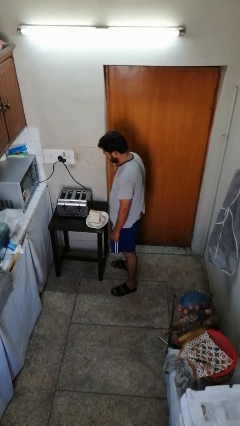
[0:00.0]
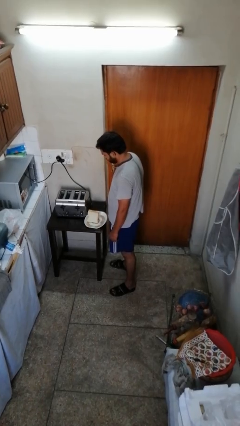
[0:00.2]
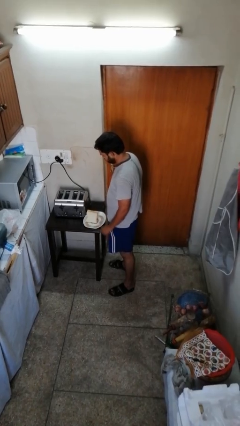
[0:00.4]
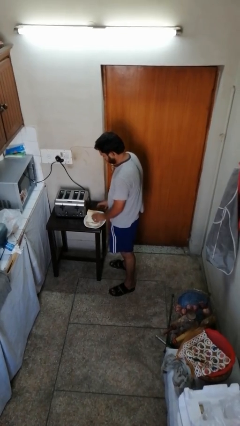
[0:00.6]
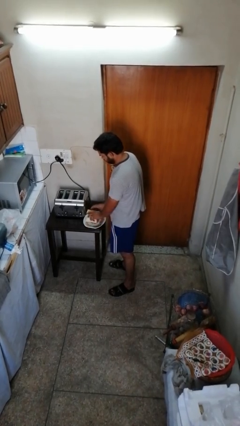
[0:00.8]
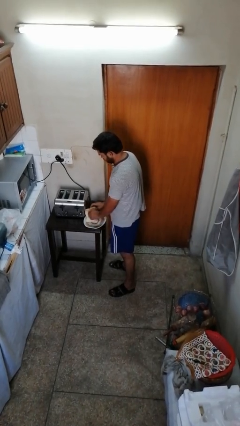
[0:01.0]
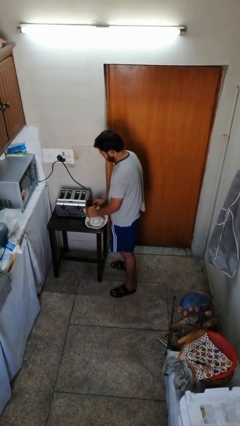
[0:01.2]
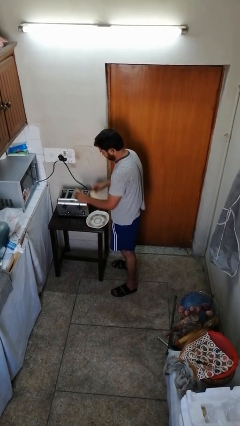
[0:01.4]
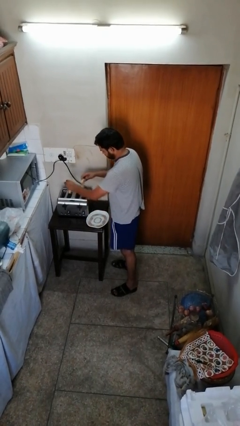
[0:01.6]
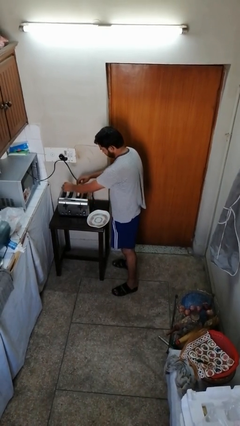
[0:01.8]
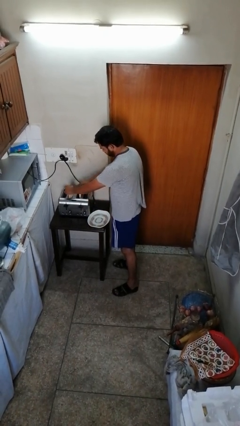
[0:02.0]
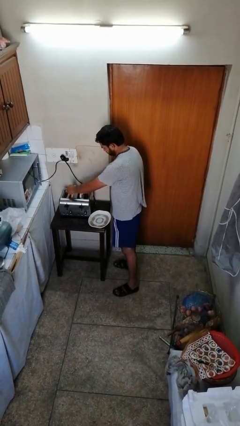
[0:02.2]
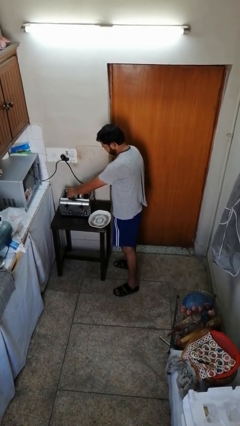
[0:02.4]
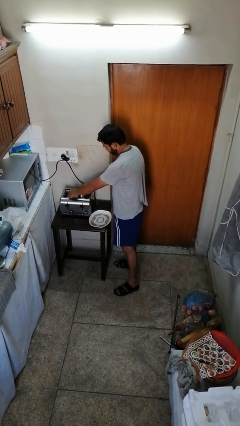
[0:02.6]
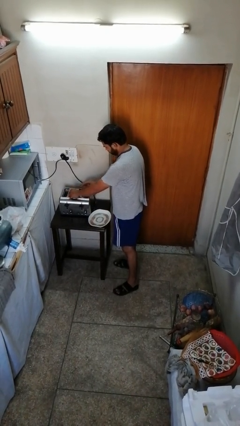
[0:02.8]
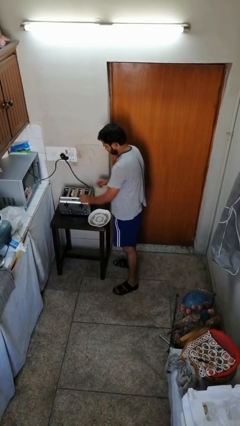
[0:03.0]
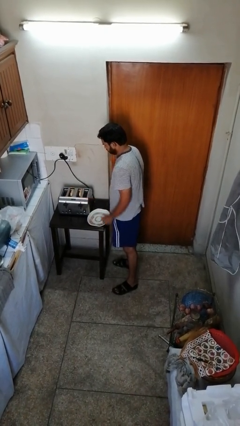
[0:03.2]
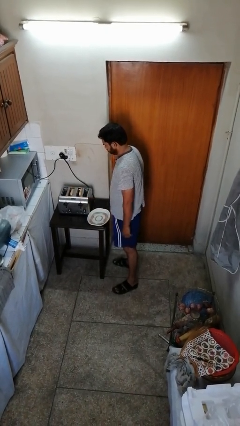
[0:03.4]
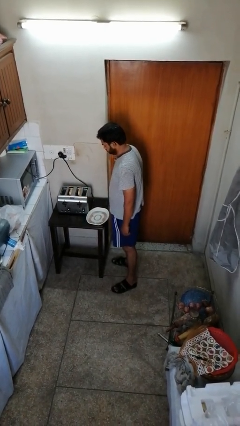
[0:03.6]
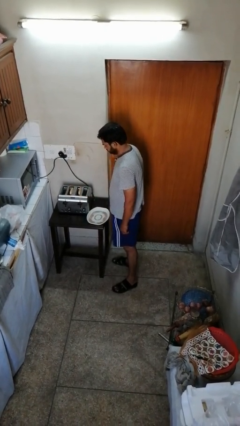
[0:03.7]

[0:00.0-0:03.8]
person puts object into toaster

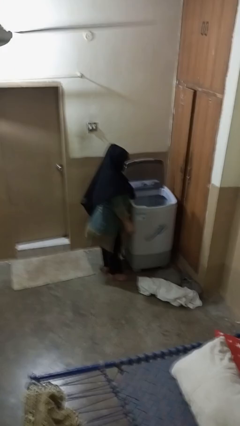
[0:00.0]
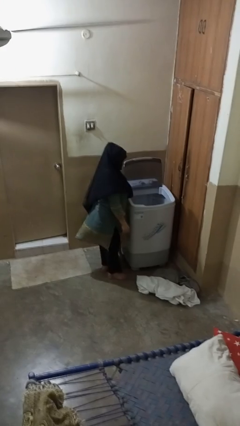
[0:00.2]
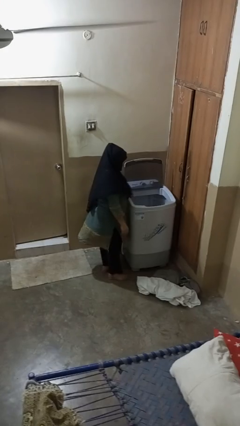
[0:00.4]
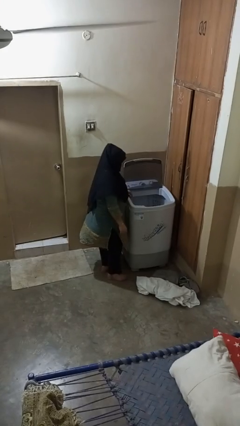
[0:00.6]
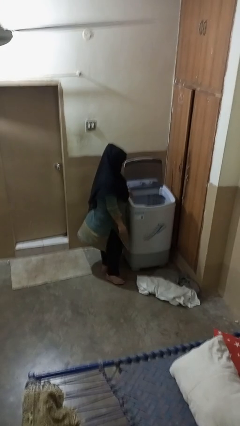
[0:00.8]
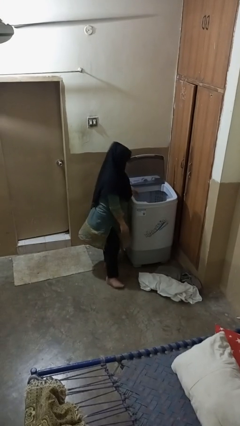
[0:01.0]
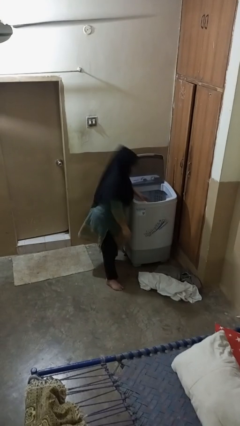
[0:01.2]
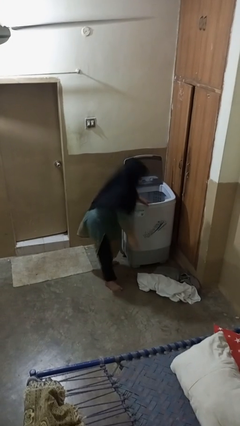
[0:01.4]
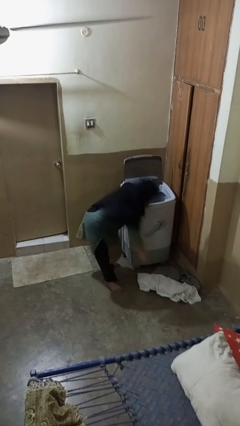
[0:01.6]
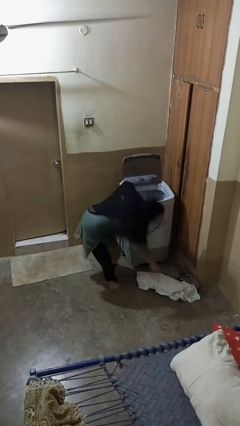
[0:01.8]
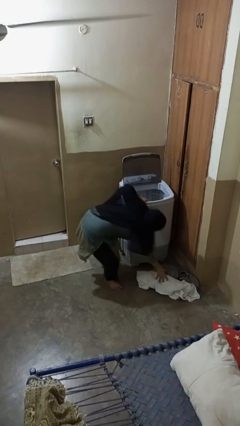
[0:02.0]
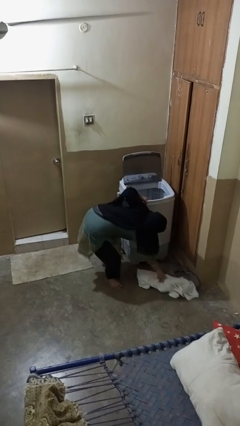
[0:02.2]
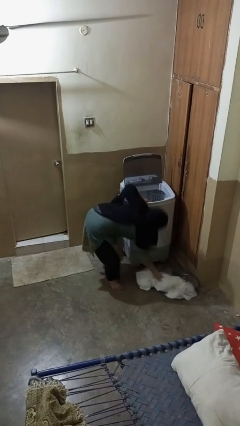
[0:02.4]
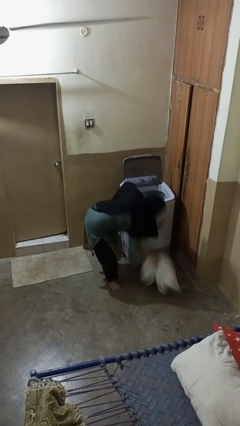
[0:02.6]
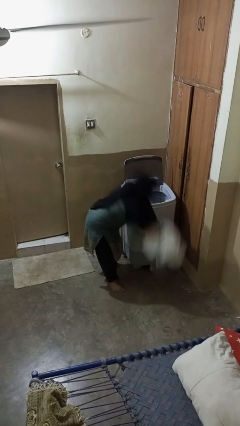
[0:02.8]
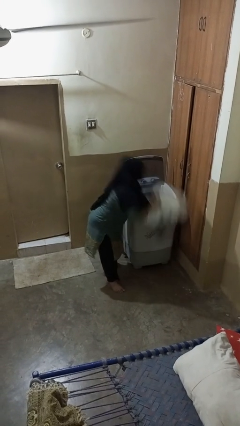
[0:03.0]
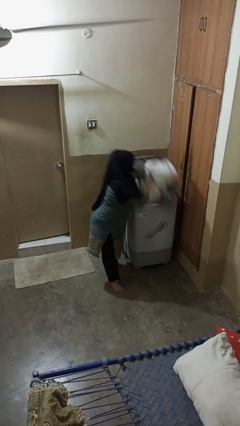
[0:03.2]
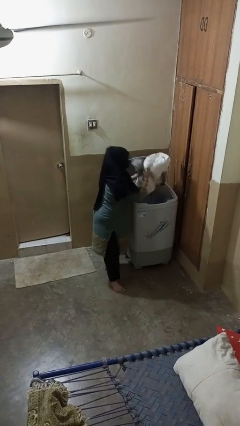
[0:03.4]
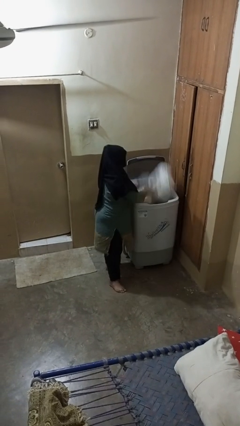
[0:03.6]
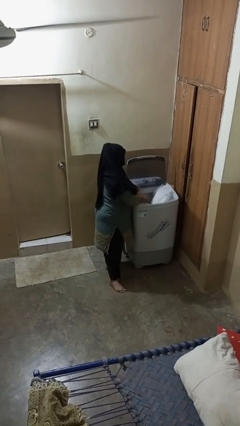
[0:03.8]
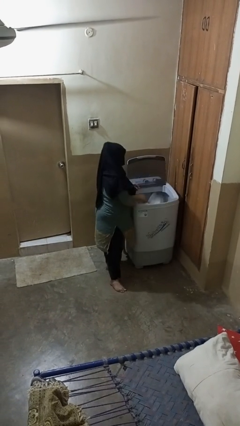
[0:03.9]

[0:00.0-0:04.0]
person loads clotheswasher

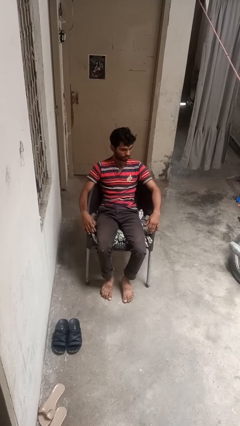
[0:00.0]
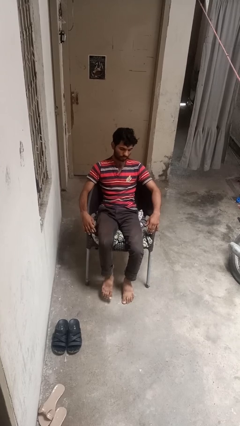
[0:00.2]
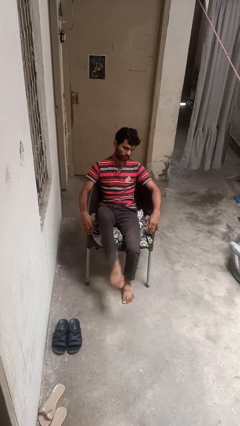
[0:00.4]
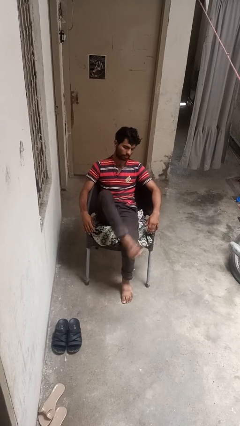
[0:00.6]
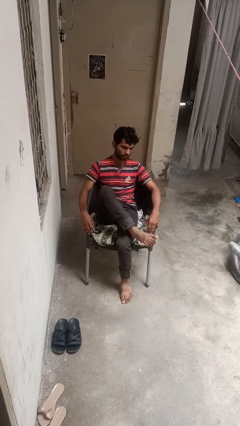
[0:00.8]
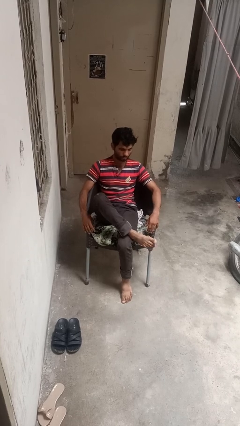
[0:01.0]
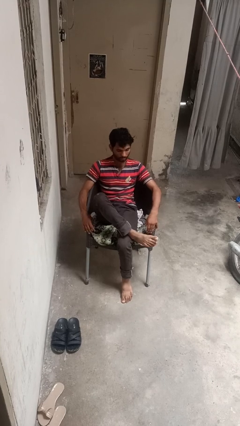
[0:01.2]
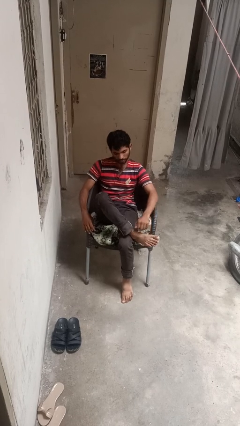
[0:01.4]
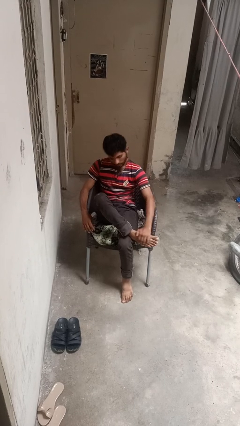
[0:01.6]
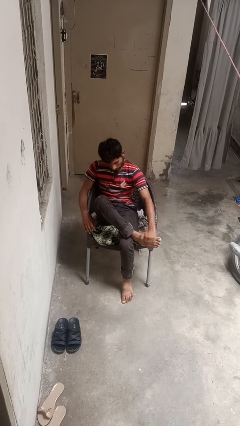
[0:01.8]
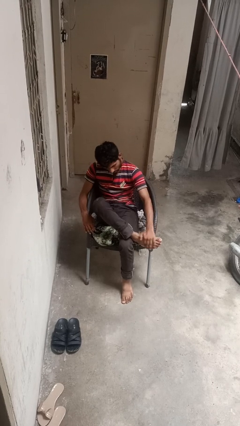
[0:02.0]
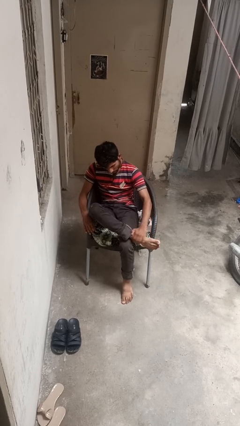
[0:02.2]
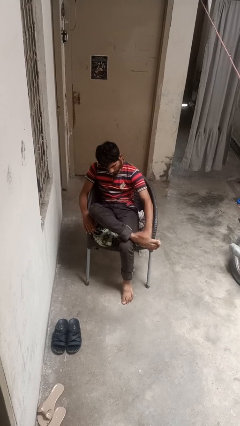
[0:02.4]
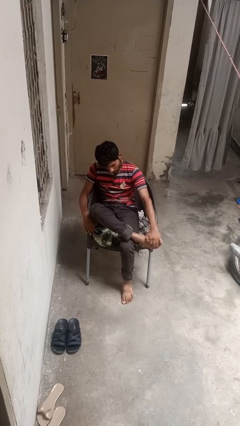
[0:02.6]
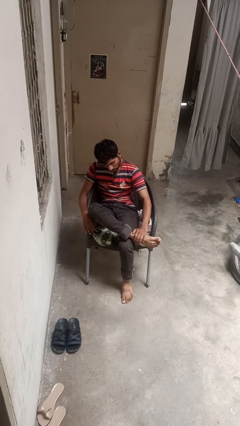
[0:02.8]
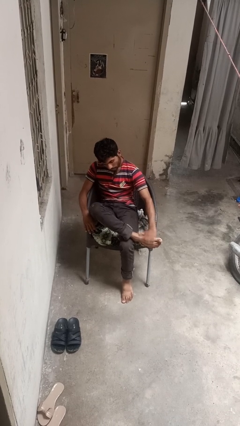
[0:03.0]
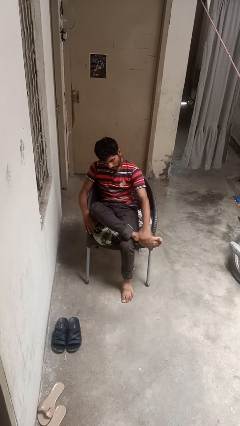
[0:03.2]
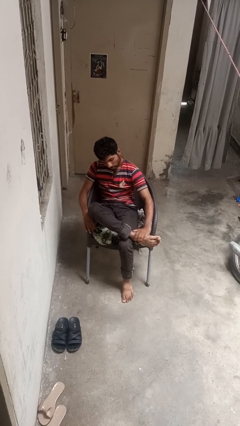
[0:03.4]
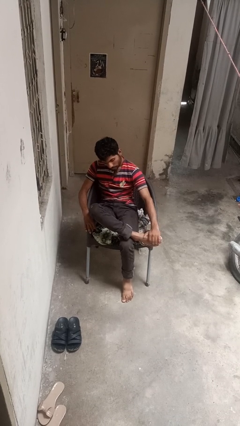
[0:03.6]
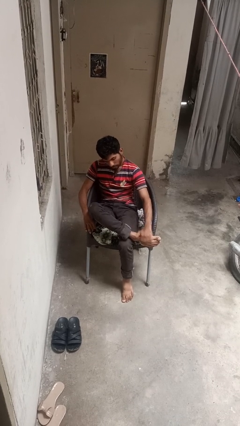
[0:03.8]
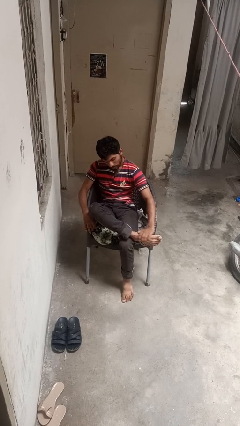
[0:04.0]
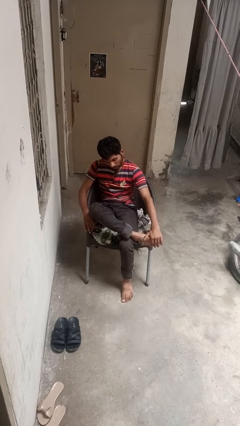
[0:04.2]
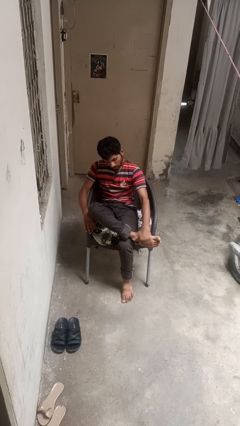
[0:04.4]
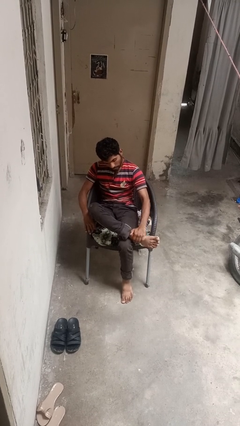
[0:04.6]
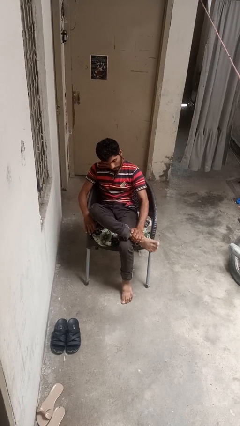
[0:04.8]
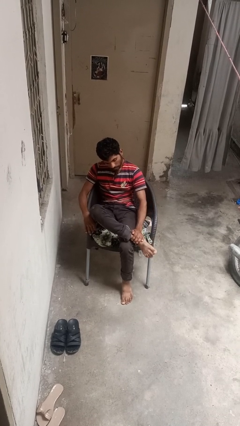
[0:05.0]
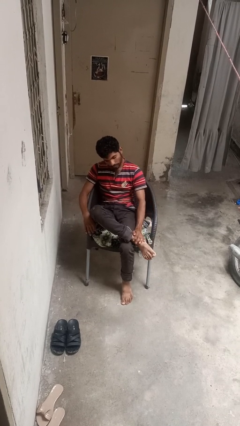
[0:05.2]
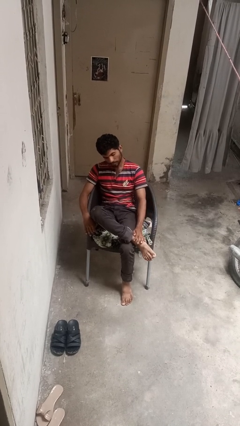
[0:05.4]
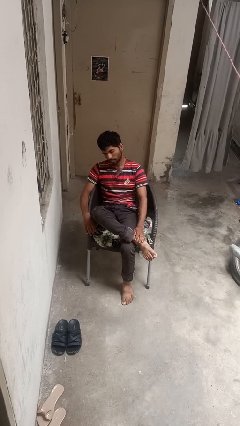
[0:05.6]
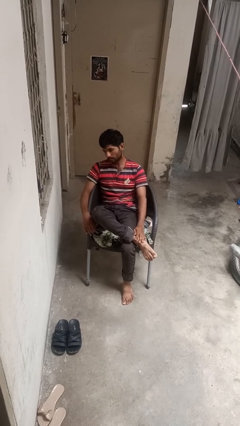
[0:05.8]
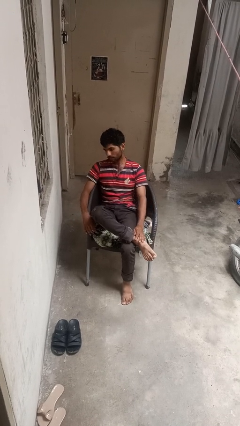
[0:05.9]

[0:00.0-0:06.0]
person rubs foot

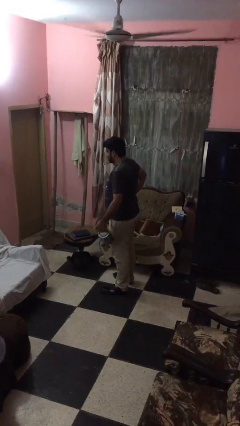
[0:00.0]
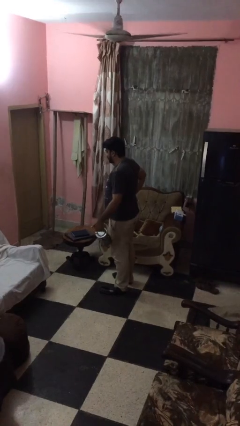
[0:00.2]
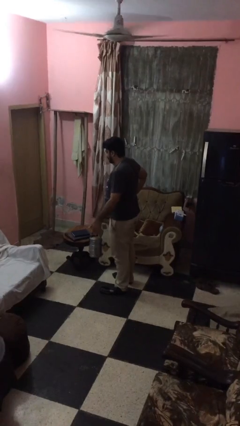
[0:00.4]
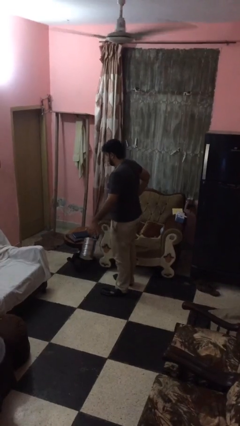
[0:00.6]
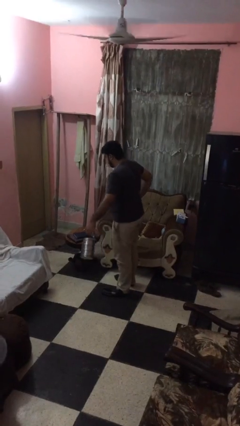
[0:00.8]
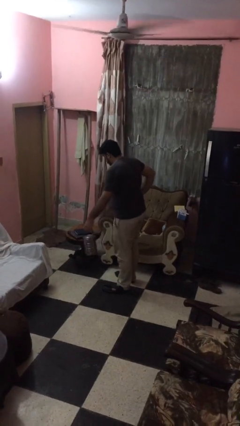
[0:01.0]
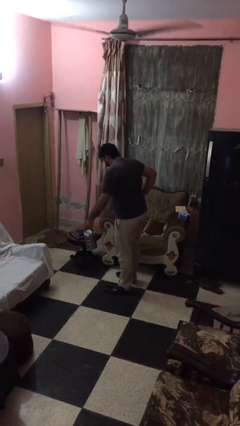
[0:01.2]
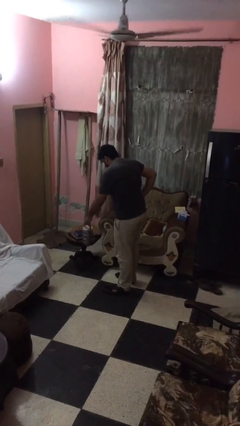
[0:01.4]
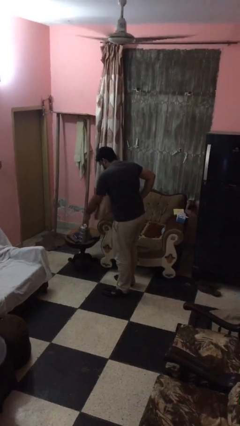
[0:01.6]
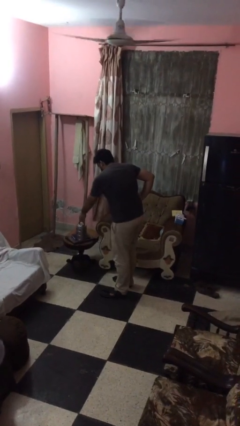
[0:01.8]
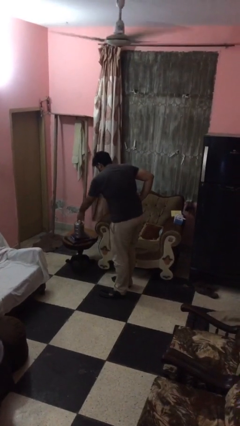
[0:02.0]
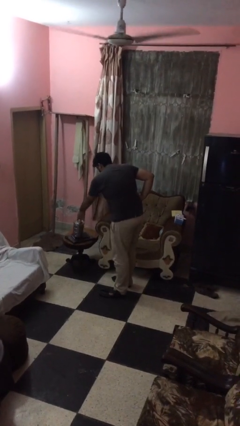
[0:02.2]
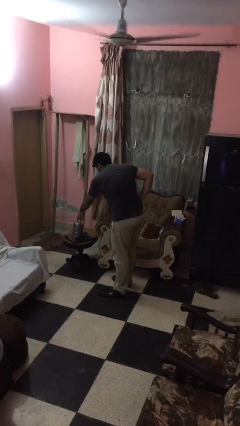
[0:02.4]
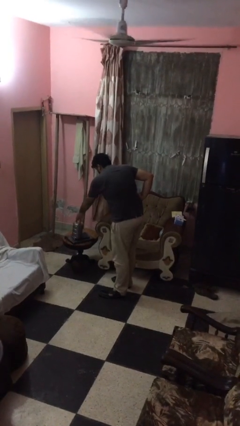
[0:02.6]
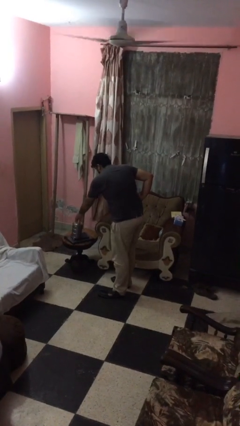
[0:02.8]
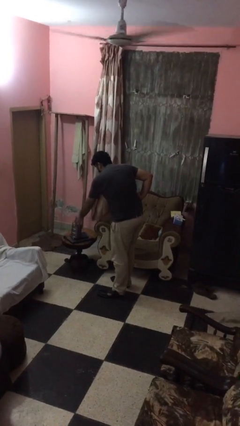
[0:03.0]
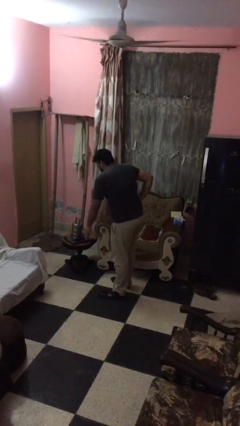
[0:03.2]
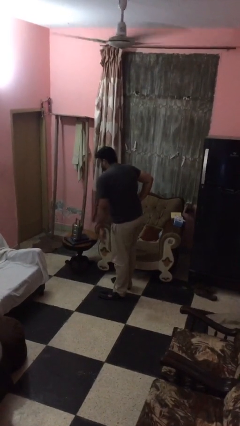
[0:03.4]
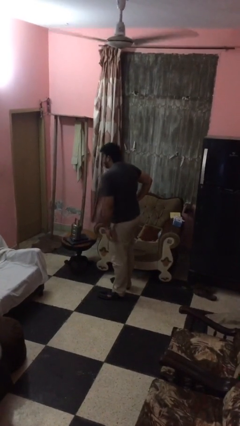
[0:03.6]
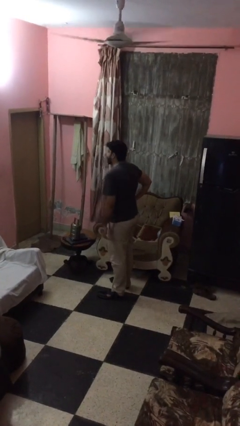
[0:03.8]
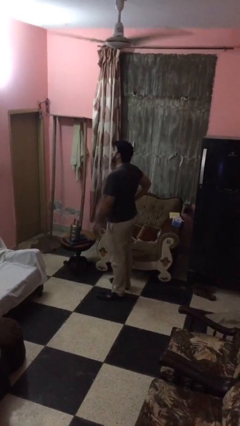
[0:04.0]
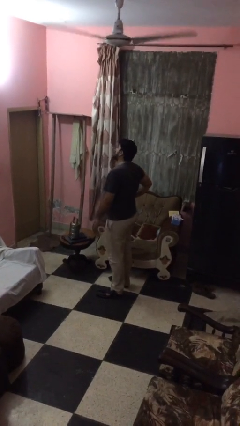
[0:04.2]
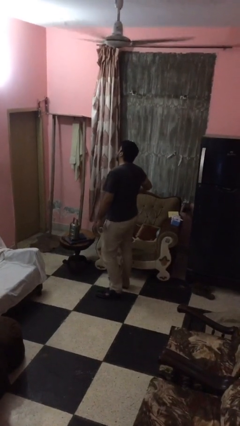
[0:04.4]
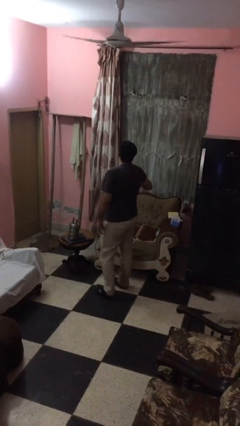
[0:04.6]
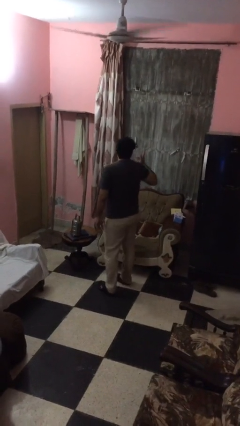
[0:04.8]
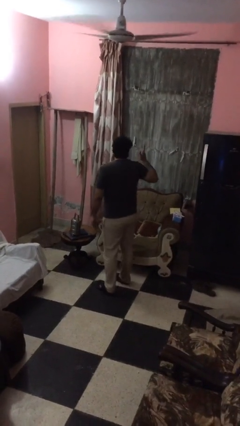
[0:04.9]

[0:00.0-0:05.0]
person puts down object on table
